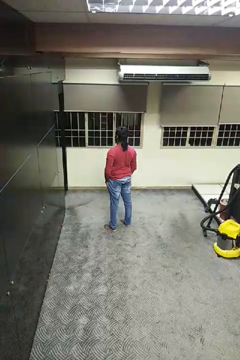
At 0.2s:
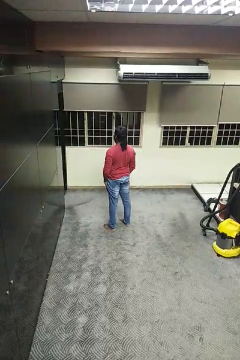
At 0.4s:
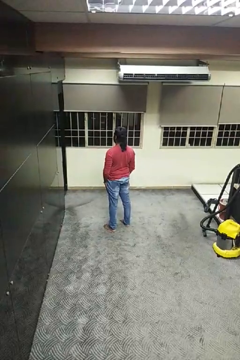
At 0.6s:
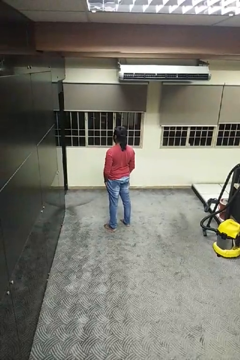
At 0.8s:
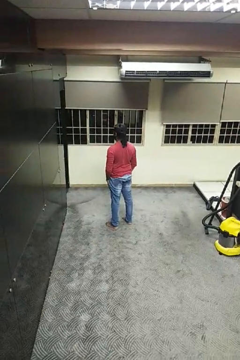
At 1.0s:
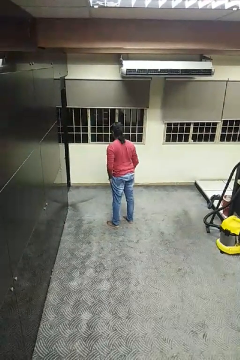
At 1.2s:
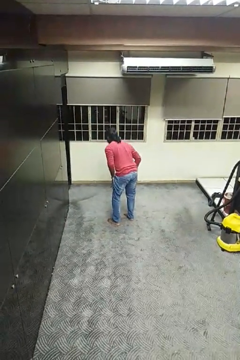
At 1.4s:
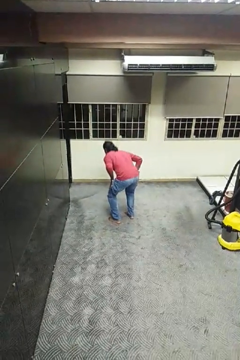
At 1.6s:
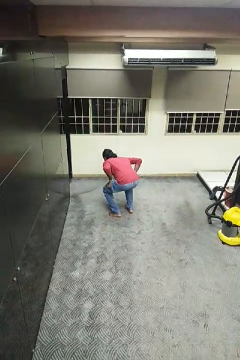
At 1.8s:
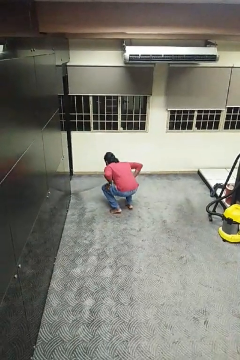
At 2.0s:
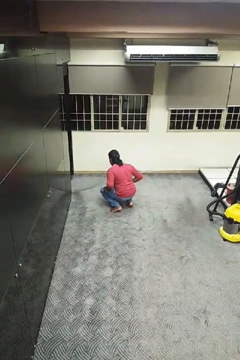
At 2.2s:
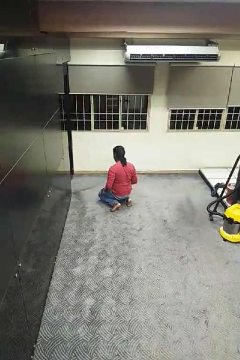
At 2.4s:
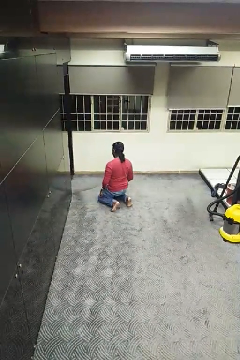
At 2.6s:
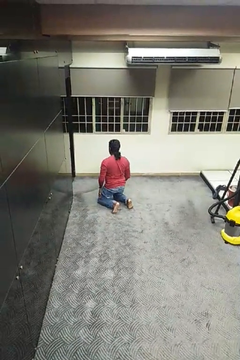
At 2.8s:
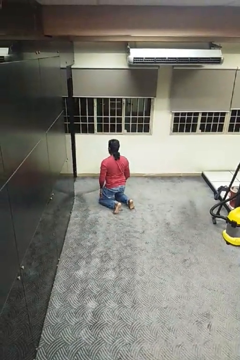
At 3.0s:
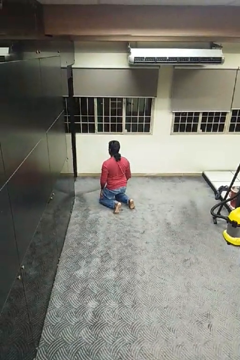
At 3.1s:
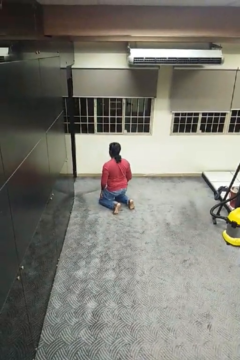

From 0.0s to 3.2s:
person kneels

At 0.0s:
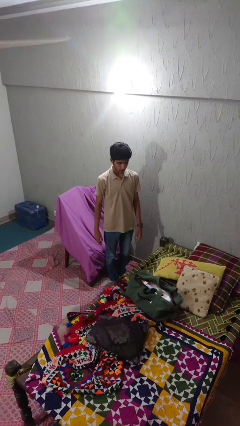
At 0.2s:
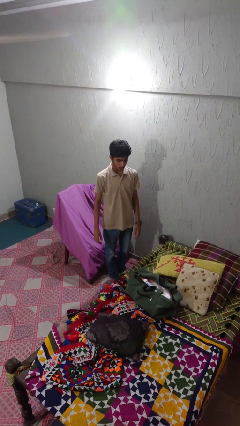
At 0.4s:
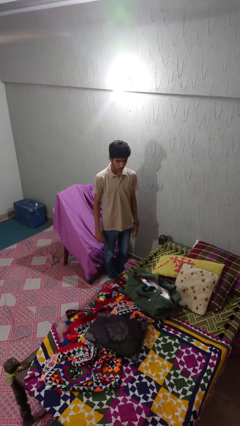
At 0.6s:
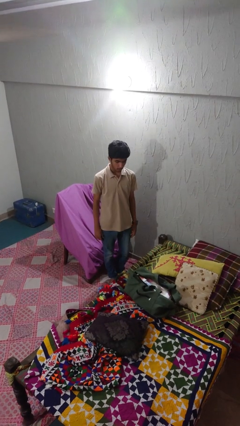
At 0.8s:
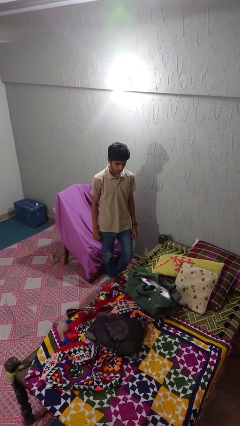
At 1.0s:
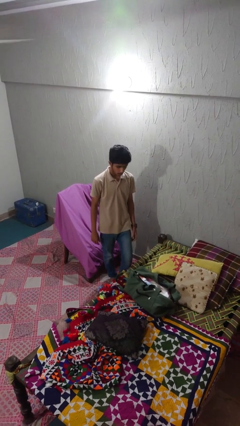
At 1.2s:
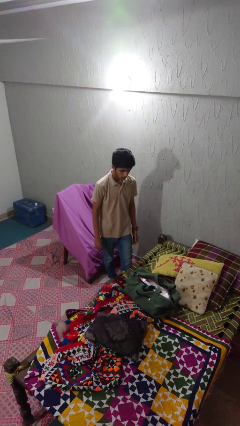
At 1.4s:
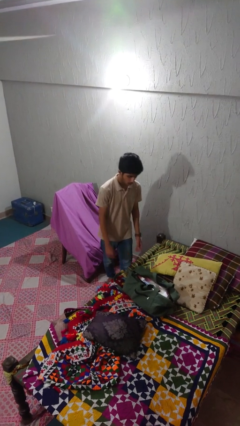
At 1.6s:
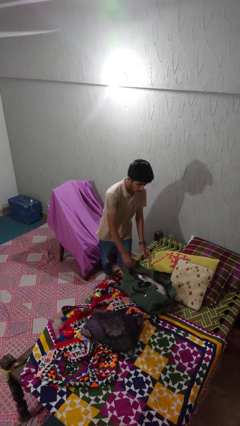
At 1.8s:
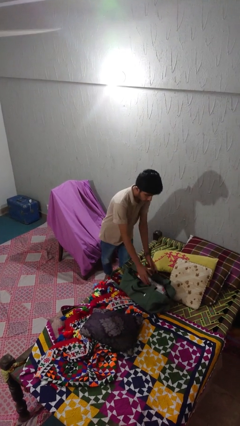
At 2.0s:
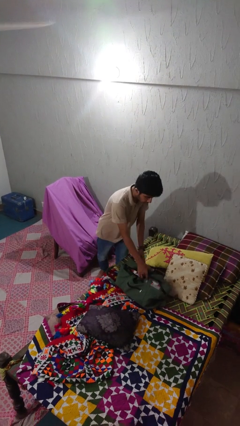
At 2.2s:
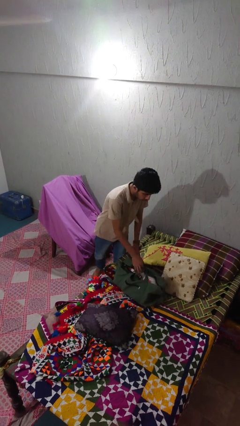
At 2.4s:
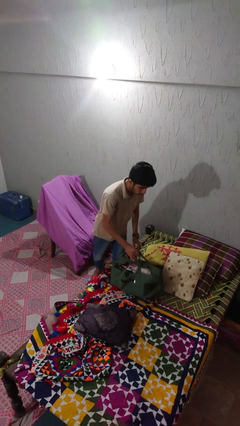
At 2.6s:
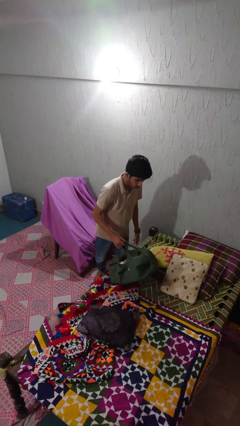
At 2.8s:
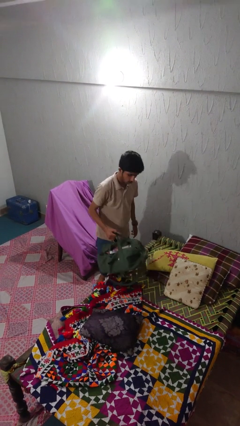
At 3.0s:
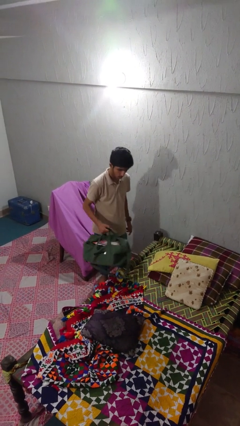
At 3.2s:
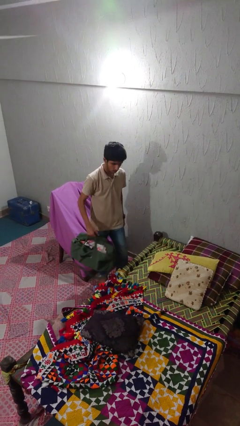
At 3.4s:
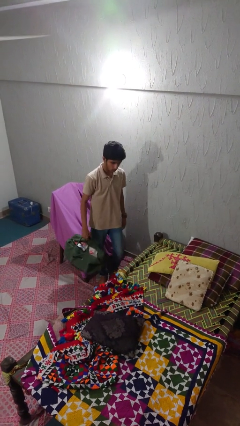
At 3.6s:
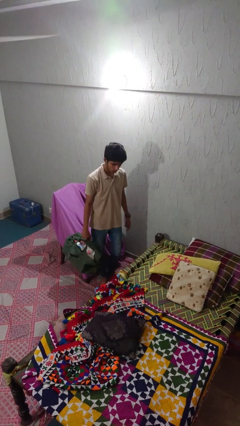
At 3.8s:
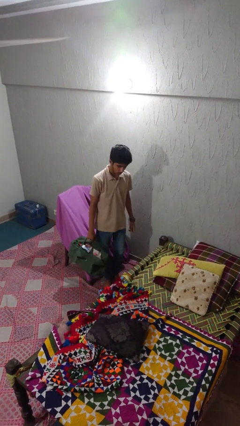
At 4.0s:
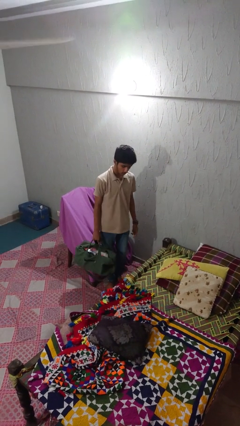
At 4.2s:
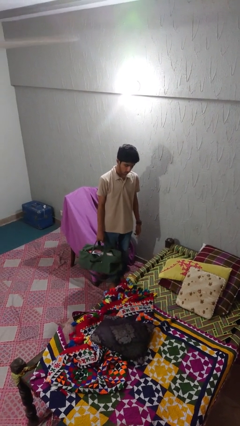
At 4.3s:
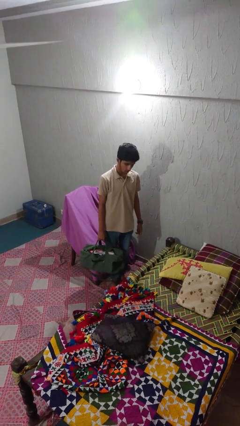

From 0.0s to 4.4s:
person picks up object from bed

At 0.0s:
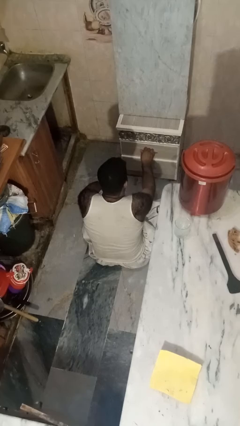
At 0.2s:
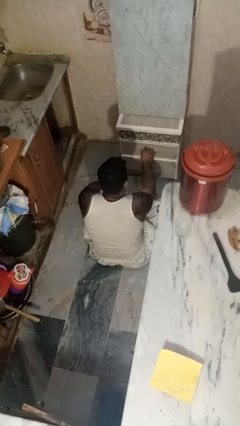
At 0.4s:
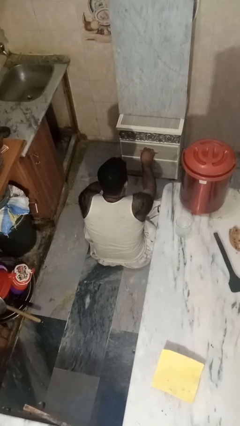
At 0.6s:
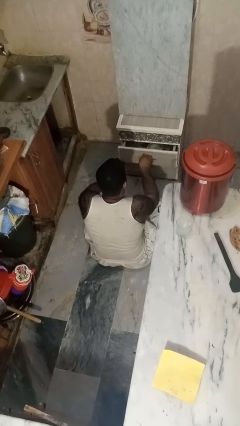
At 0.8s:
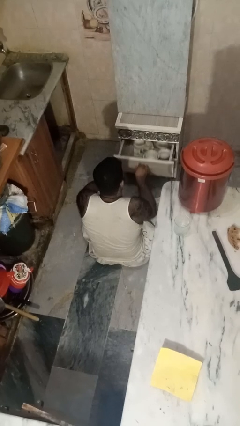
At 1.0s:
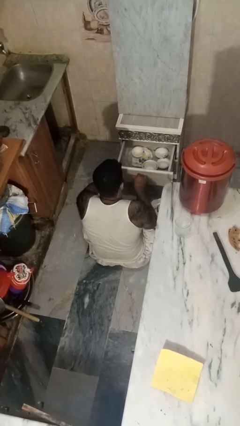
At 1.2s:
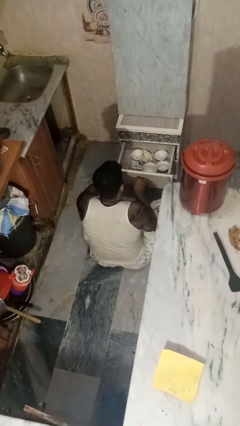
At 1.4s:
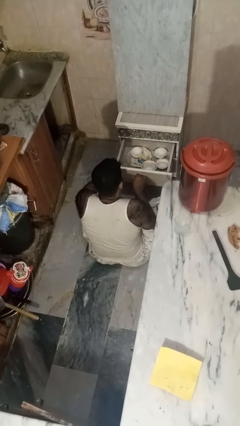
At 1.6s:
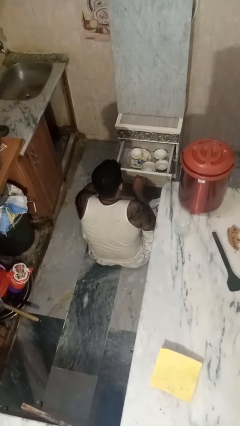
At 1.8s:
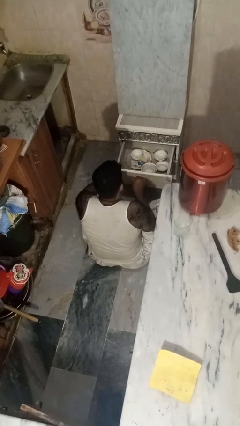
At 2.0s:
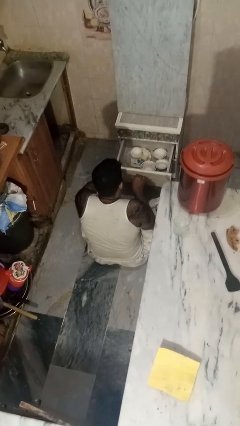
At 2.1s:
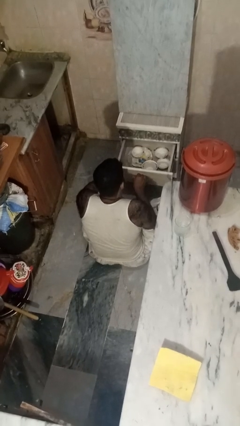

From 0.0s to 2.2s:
person opens kitchen drawer

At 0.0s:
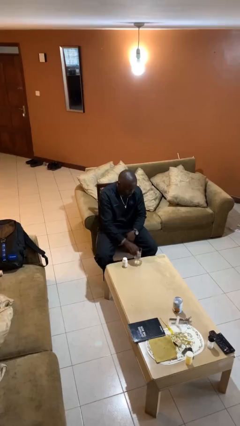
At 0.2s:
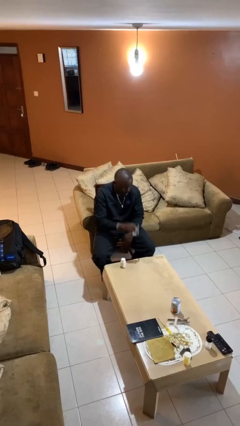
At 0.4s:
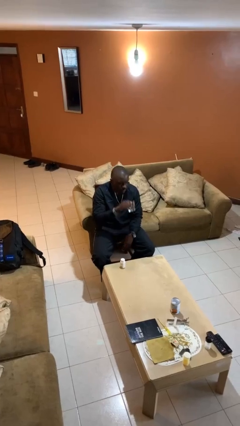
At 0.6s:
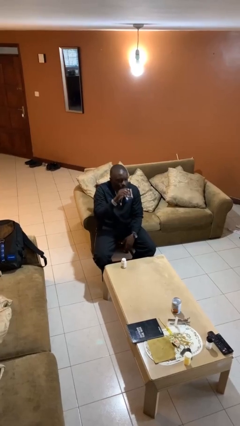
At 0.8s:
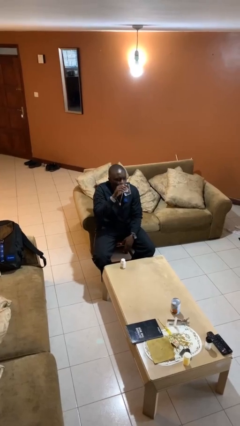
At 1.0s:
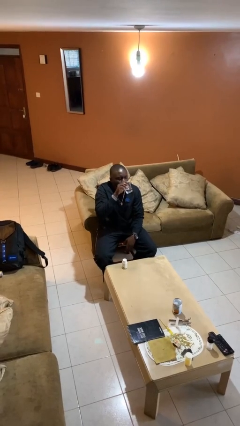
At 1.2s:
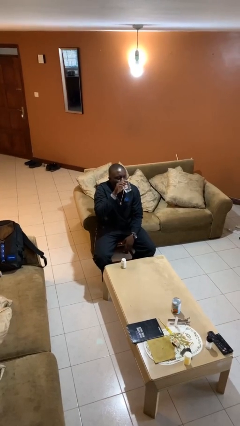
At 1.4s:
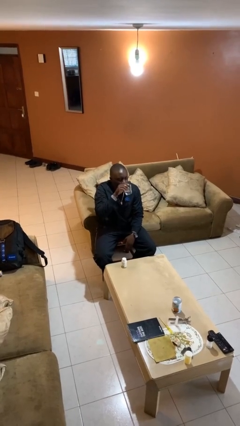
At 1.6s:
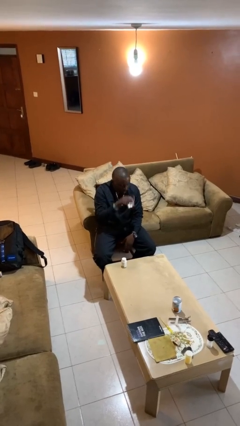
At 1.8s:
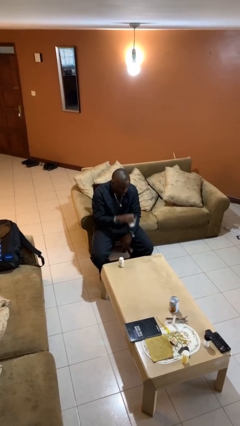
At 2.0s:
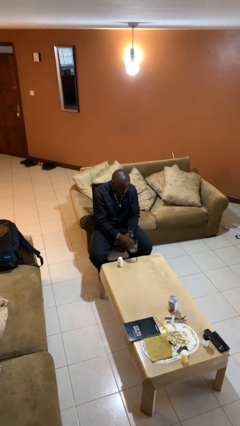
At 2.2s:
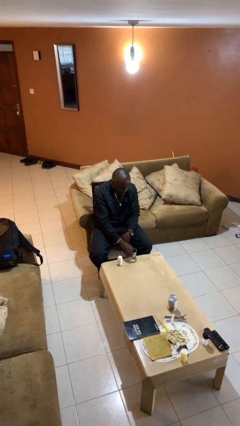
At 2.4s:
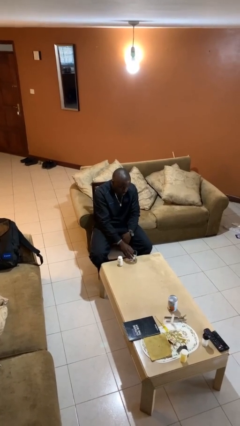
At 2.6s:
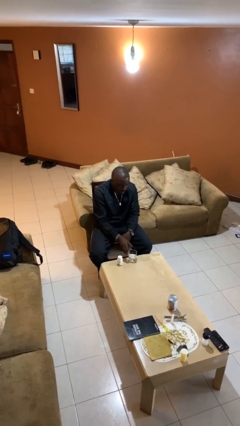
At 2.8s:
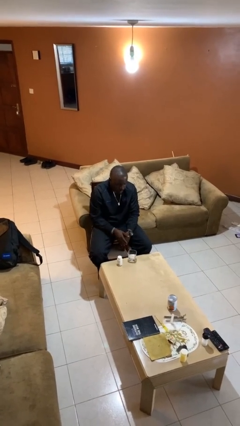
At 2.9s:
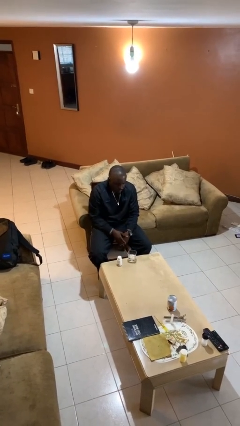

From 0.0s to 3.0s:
person drinks from cup

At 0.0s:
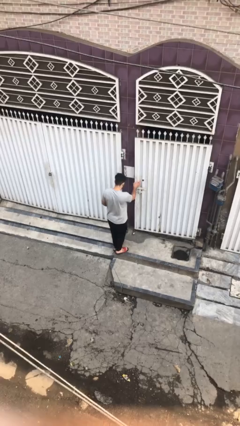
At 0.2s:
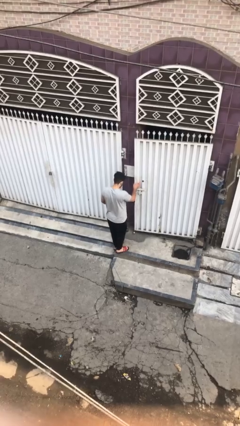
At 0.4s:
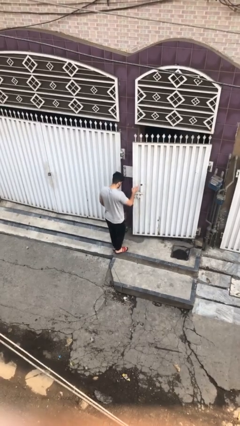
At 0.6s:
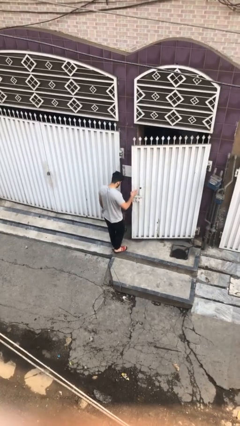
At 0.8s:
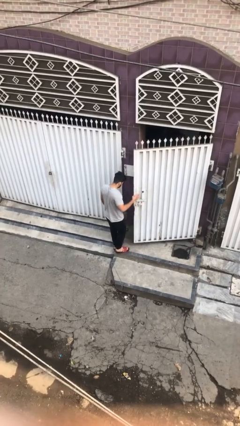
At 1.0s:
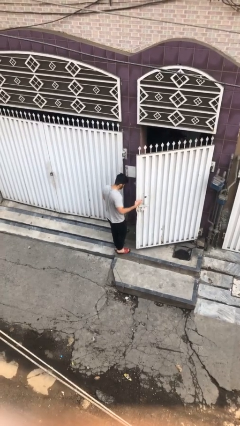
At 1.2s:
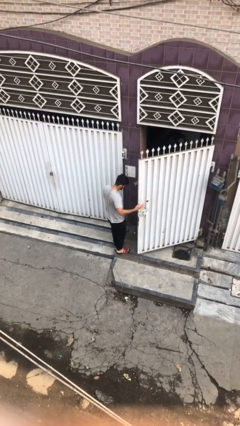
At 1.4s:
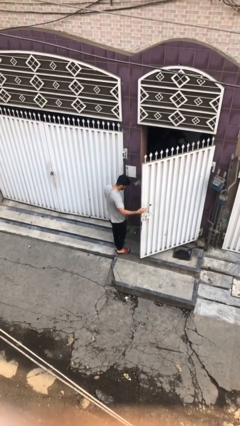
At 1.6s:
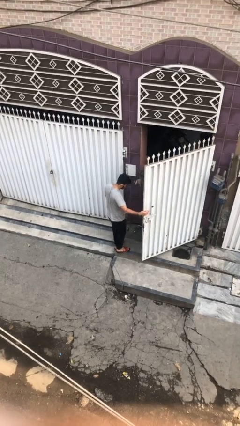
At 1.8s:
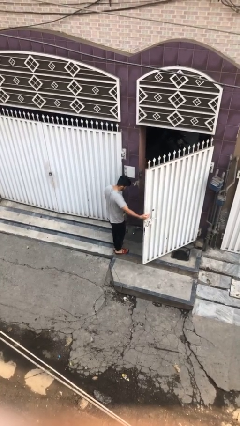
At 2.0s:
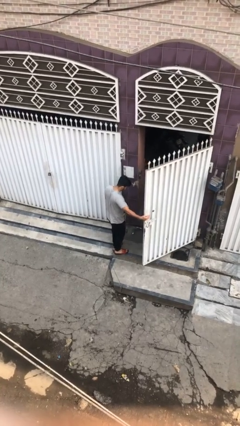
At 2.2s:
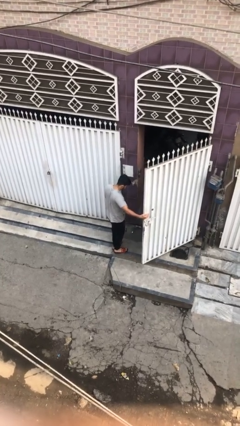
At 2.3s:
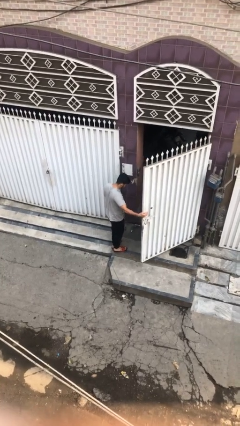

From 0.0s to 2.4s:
person opens facility door

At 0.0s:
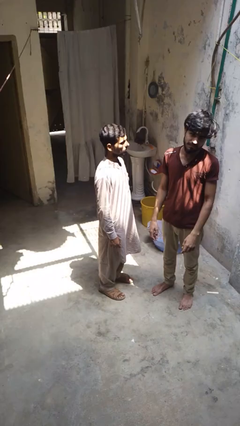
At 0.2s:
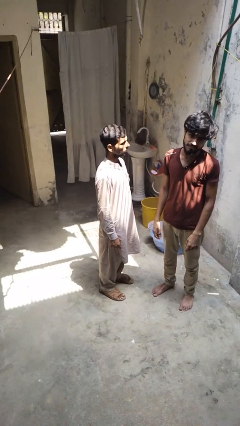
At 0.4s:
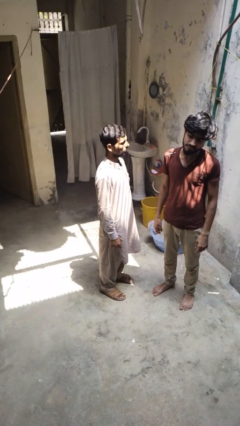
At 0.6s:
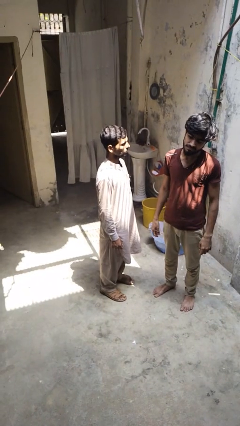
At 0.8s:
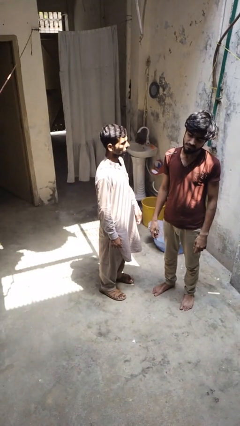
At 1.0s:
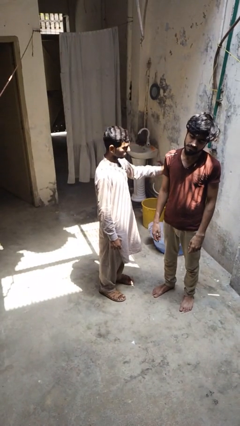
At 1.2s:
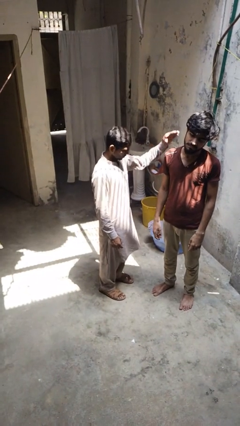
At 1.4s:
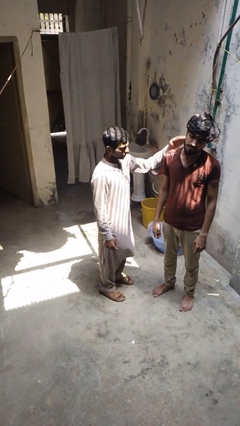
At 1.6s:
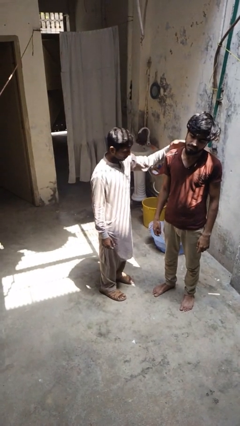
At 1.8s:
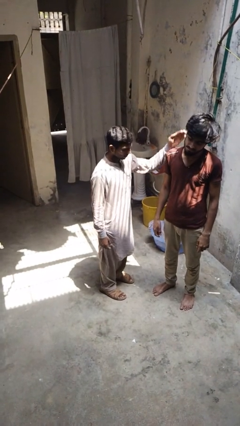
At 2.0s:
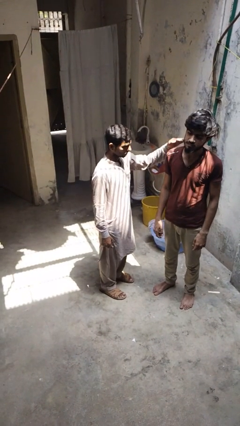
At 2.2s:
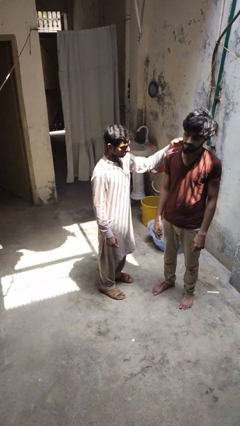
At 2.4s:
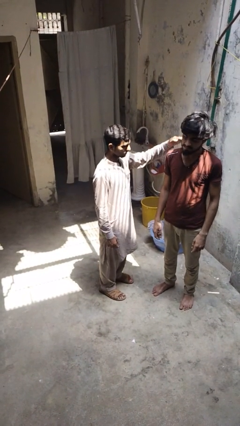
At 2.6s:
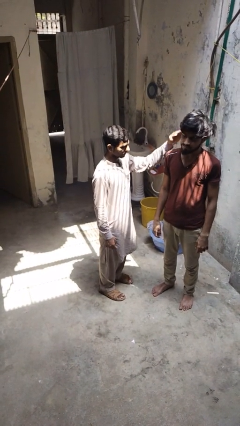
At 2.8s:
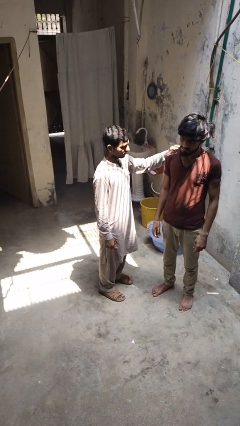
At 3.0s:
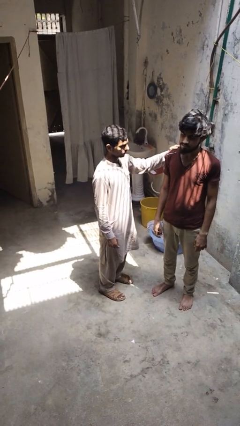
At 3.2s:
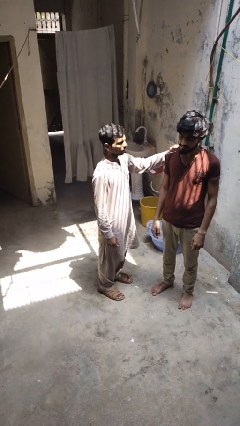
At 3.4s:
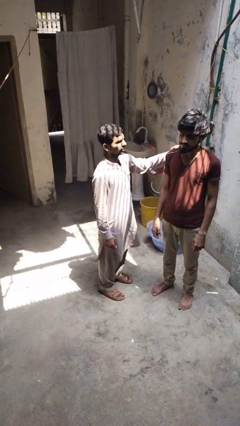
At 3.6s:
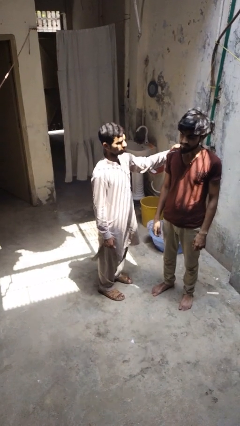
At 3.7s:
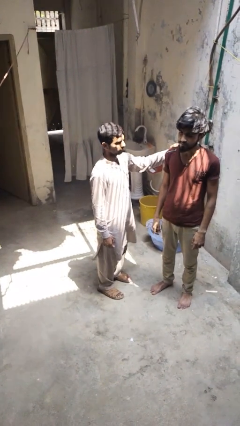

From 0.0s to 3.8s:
person pounds shoulders of person
